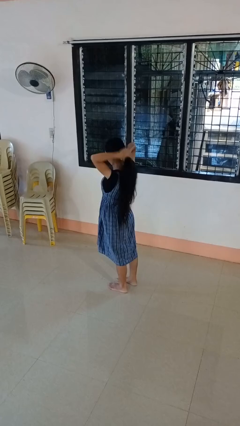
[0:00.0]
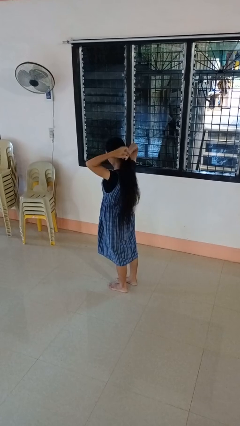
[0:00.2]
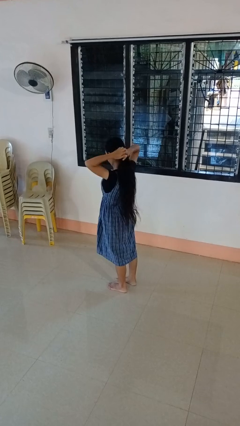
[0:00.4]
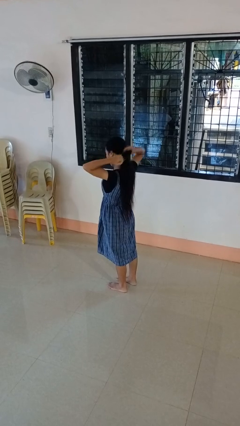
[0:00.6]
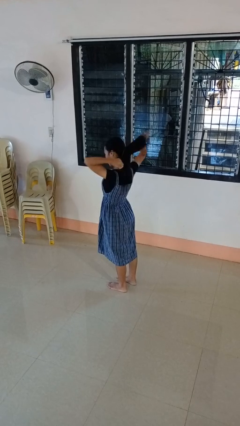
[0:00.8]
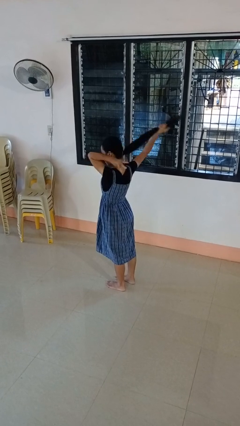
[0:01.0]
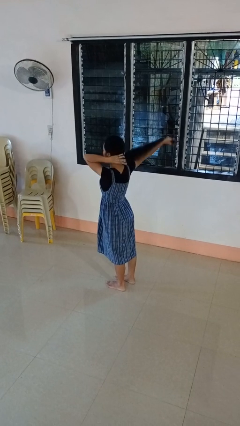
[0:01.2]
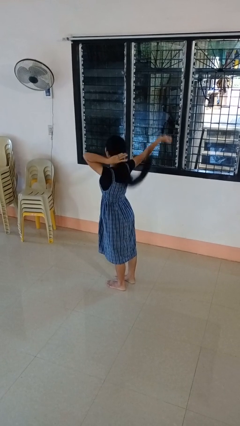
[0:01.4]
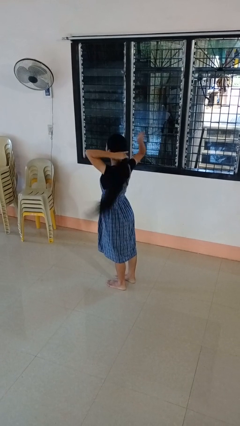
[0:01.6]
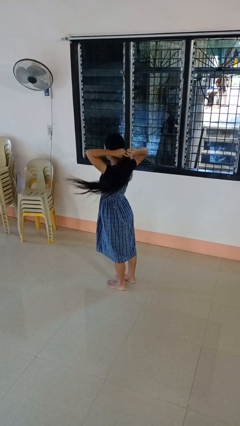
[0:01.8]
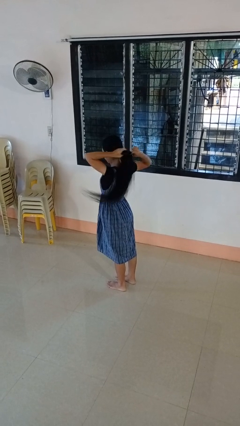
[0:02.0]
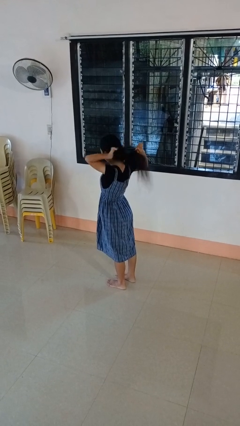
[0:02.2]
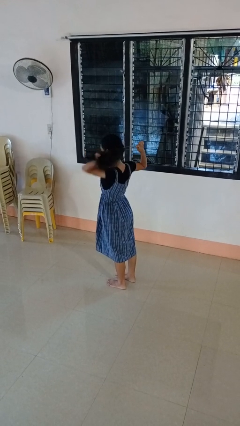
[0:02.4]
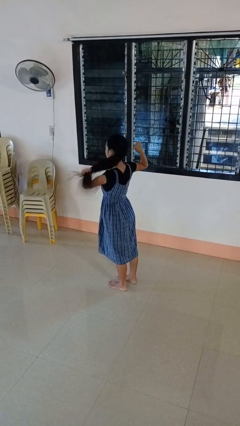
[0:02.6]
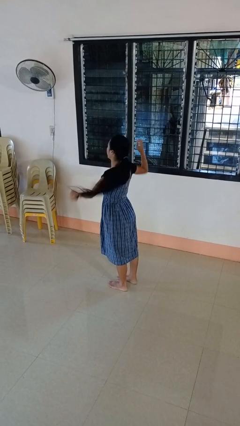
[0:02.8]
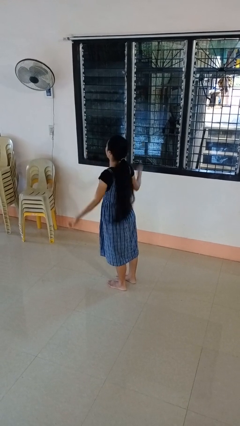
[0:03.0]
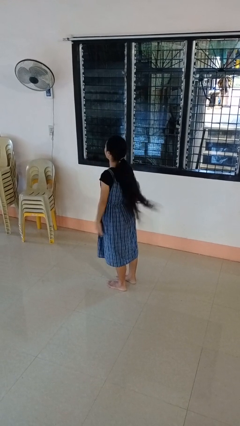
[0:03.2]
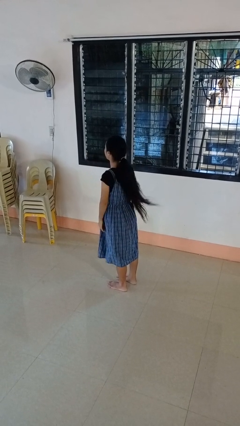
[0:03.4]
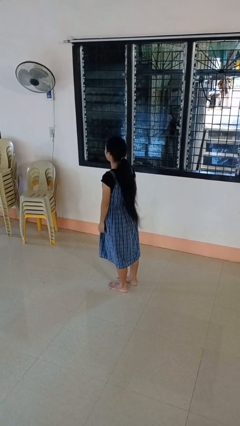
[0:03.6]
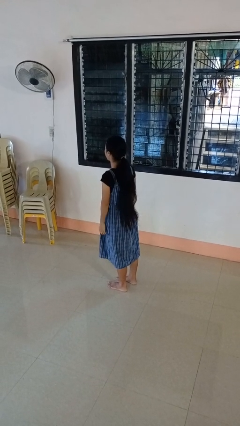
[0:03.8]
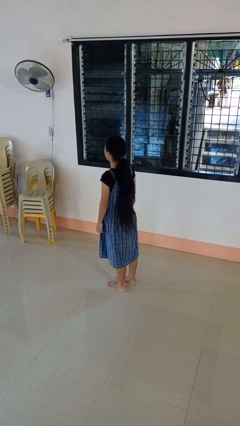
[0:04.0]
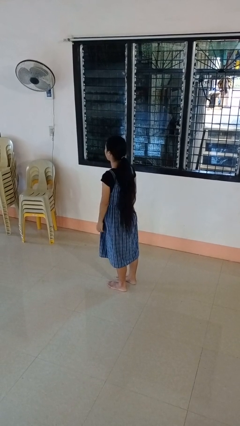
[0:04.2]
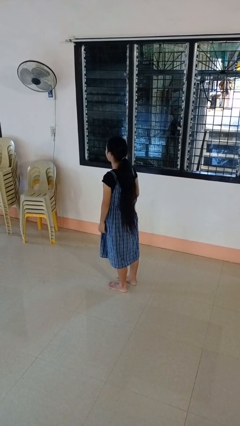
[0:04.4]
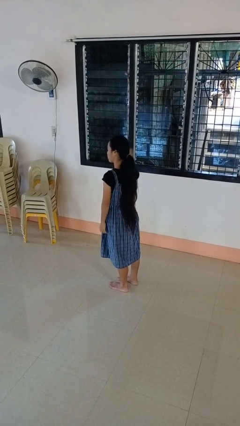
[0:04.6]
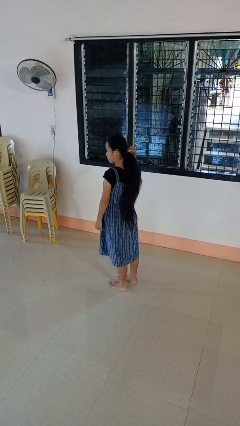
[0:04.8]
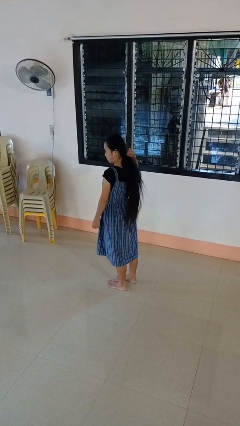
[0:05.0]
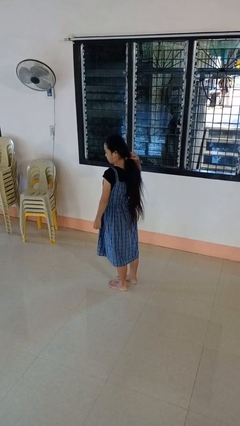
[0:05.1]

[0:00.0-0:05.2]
person puts hair in ponytail

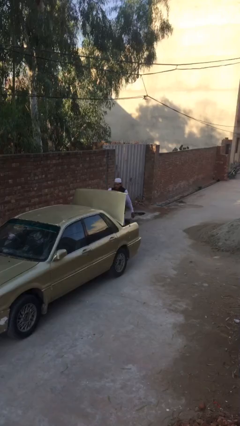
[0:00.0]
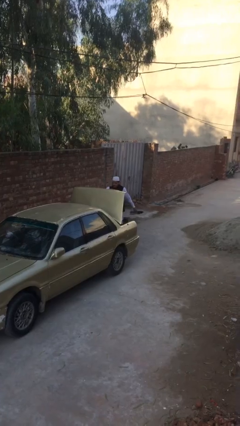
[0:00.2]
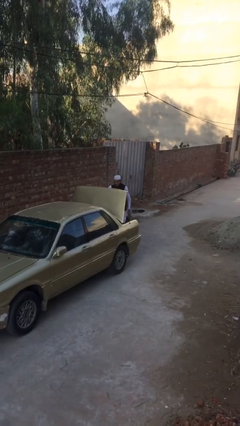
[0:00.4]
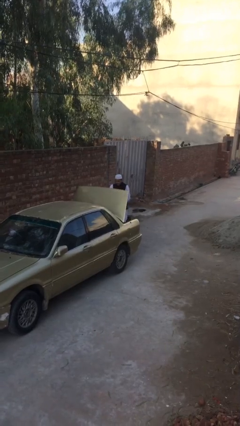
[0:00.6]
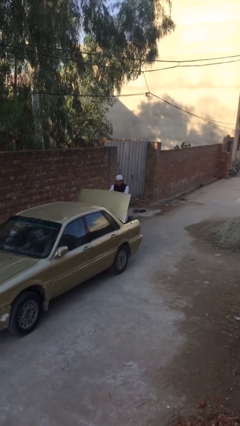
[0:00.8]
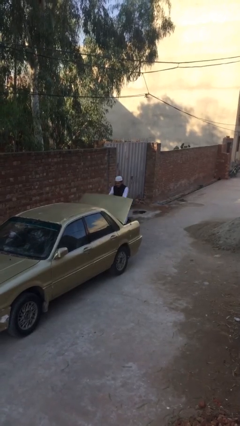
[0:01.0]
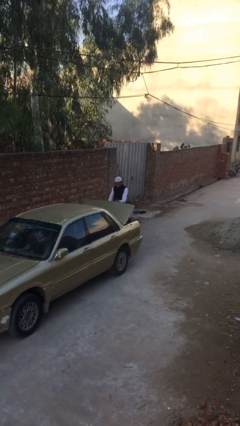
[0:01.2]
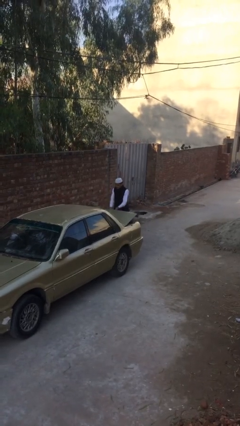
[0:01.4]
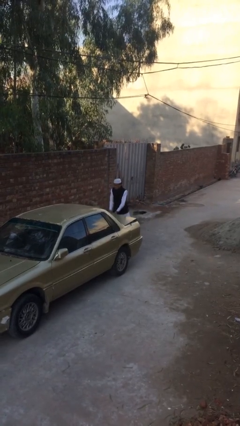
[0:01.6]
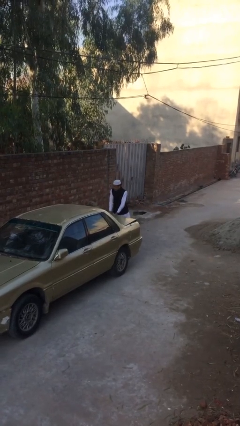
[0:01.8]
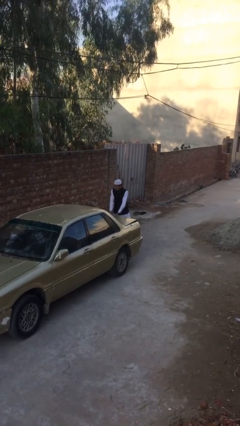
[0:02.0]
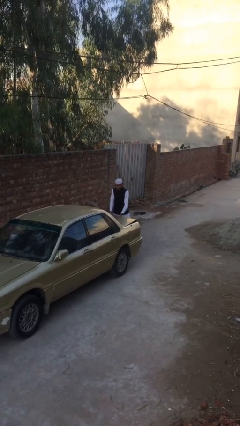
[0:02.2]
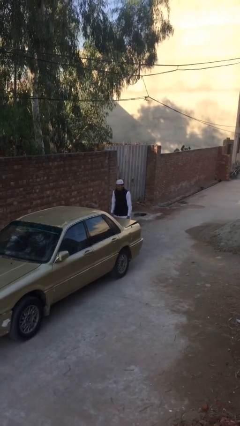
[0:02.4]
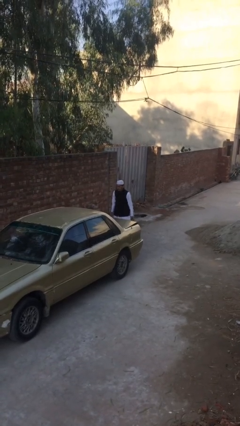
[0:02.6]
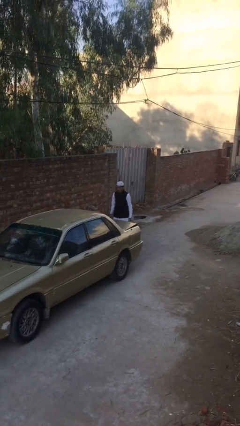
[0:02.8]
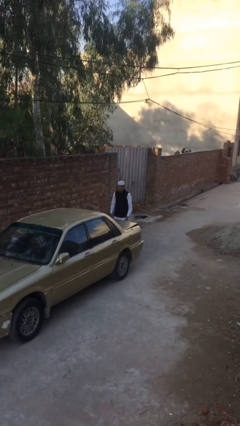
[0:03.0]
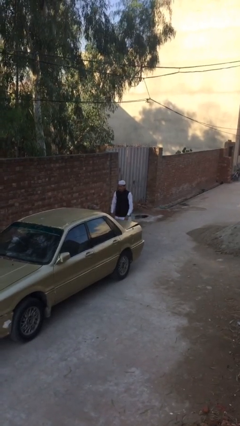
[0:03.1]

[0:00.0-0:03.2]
person closes car trunk

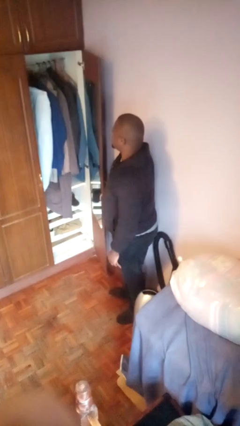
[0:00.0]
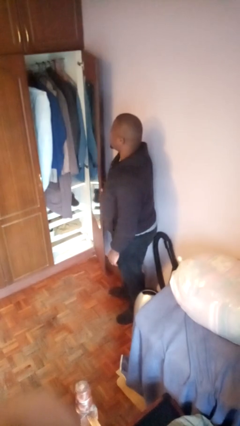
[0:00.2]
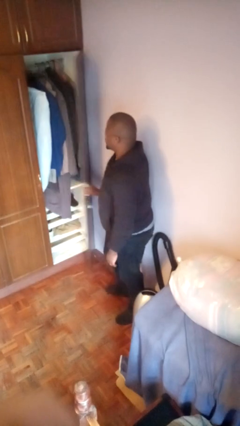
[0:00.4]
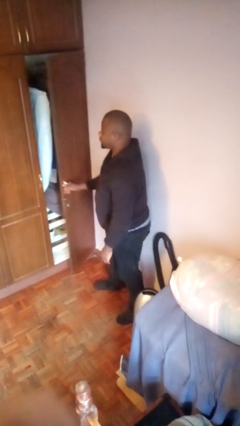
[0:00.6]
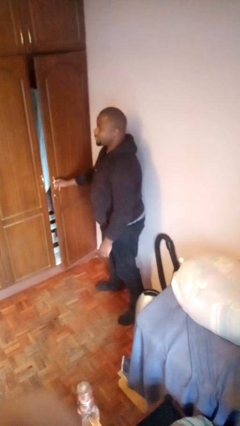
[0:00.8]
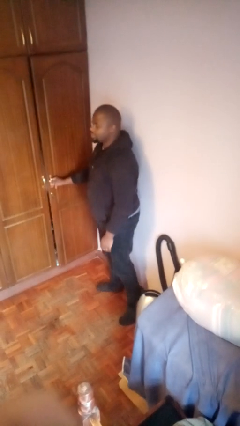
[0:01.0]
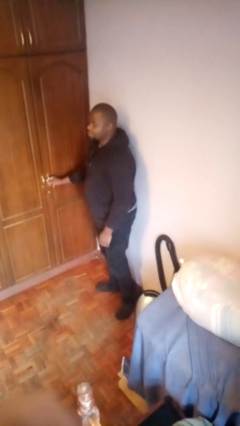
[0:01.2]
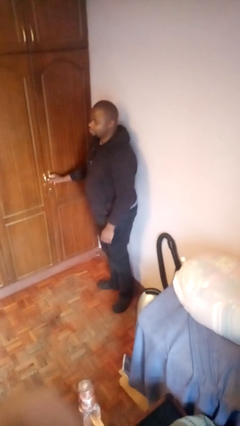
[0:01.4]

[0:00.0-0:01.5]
person closes closet door

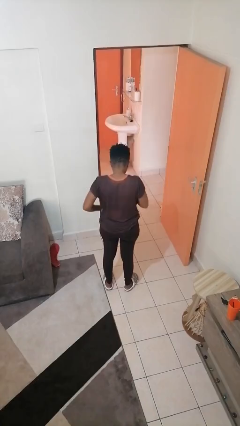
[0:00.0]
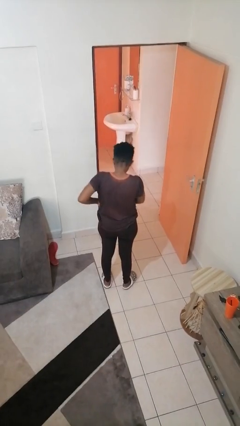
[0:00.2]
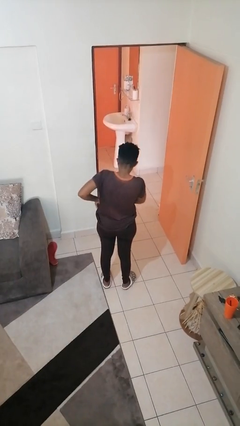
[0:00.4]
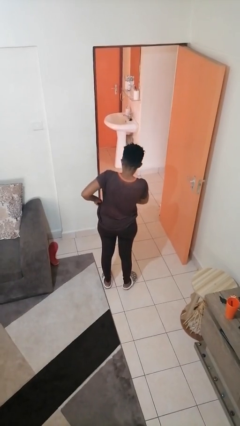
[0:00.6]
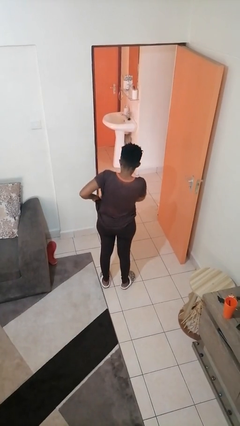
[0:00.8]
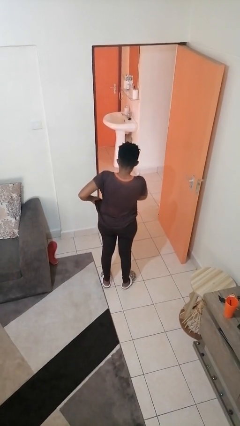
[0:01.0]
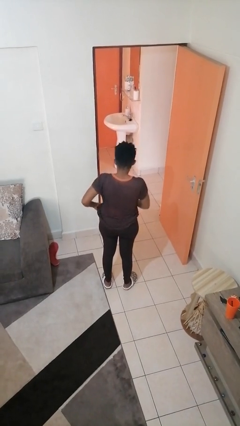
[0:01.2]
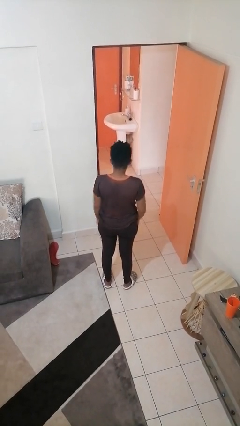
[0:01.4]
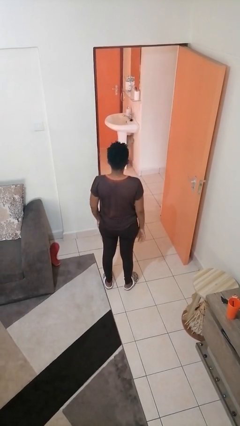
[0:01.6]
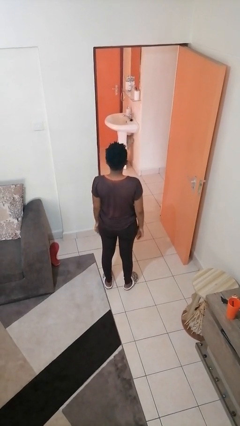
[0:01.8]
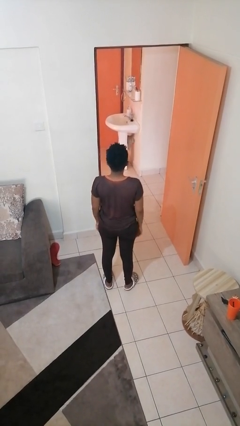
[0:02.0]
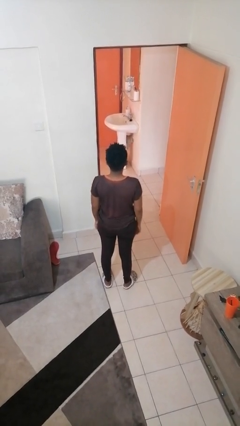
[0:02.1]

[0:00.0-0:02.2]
person puts phone into pocket

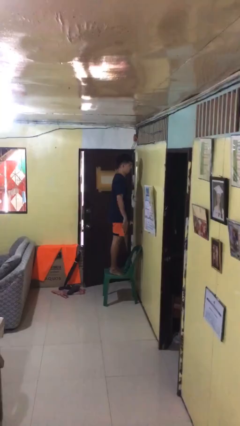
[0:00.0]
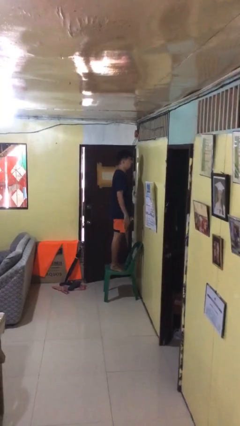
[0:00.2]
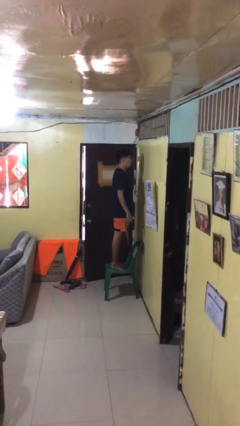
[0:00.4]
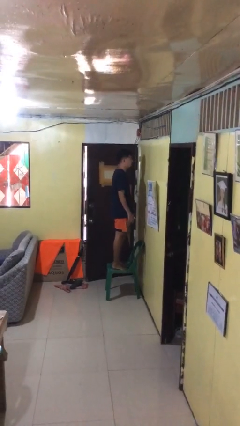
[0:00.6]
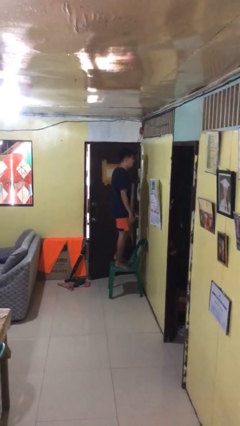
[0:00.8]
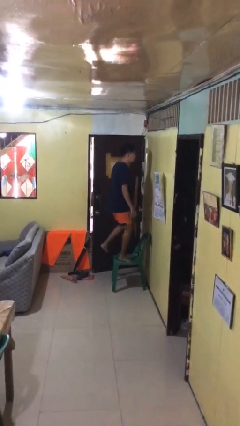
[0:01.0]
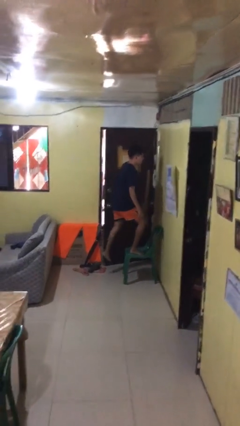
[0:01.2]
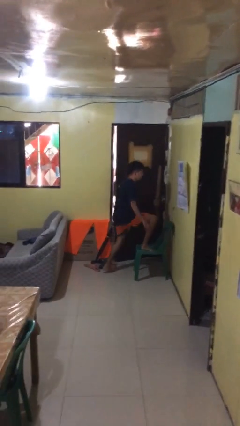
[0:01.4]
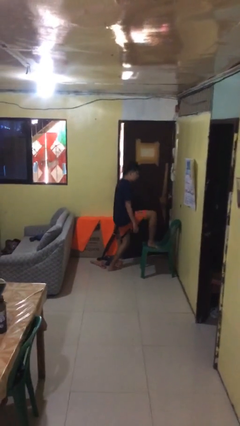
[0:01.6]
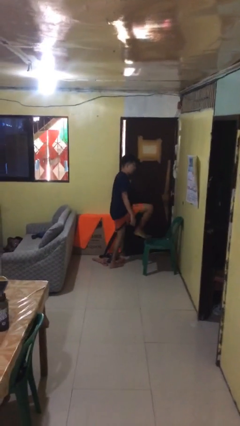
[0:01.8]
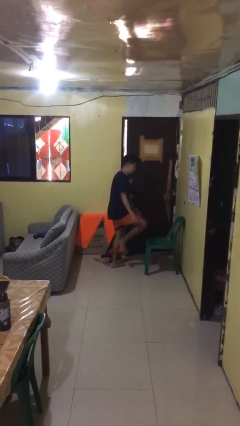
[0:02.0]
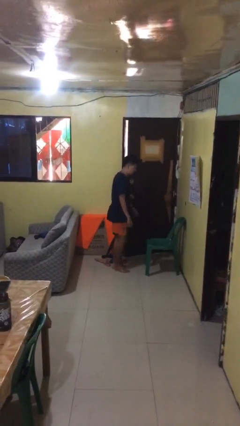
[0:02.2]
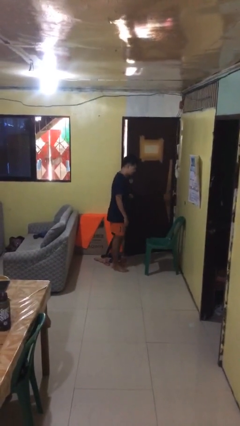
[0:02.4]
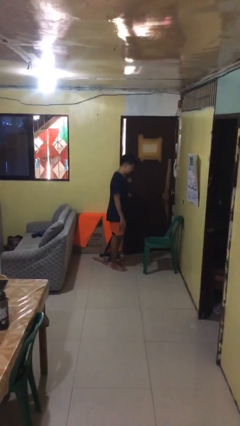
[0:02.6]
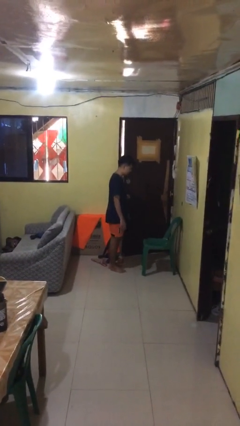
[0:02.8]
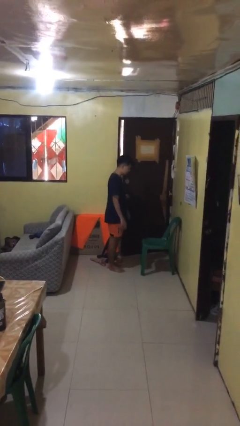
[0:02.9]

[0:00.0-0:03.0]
person climbs off chair

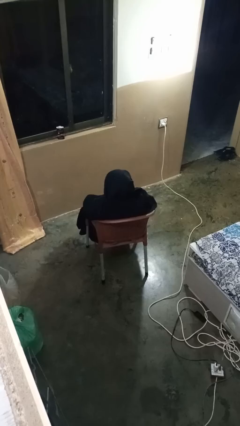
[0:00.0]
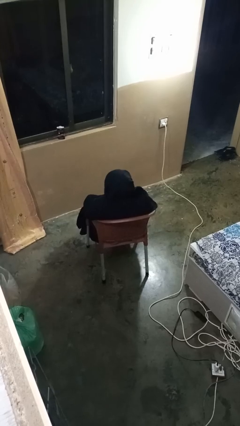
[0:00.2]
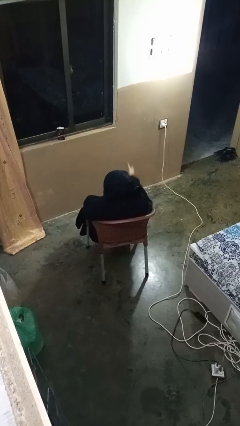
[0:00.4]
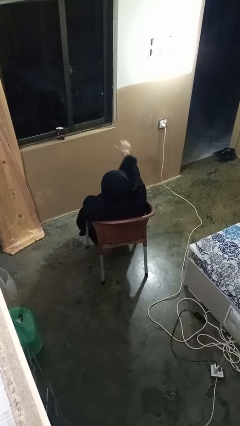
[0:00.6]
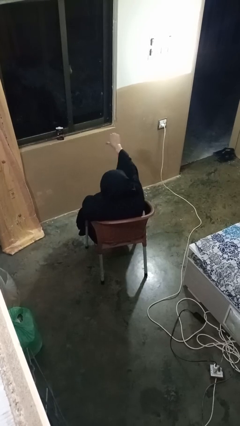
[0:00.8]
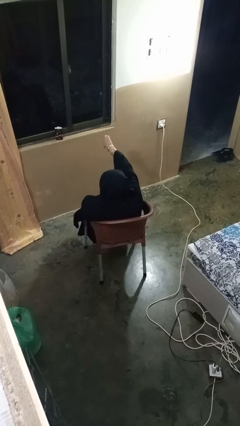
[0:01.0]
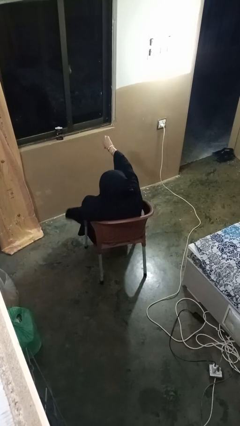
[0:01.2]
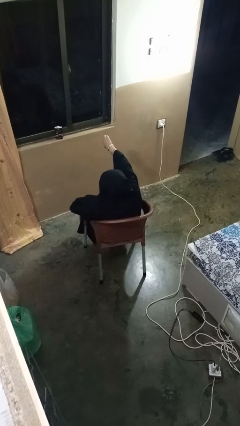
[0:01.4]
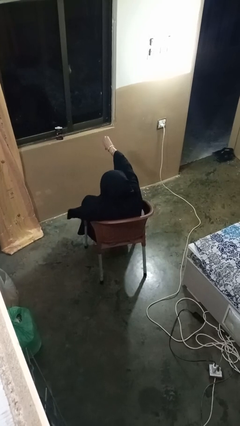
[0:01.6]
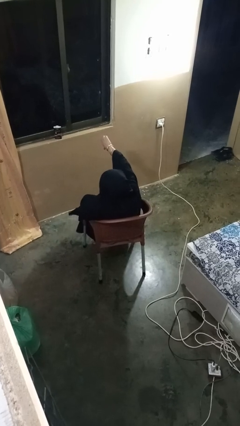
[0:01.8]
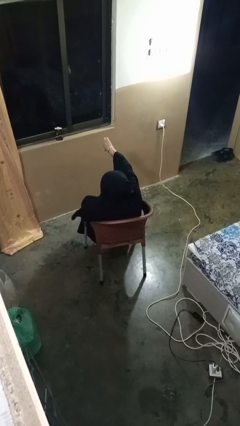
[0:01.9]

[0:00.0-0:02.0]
person gestures thumbs down

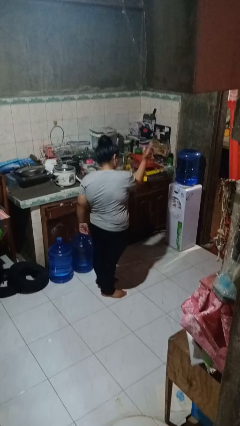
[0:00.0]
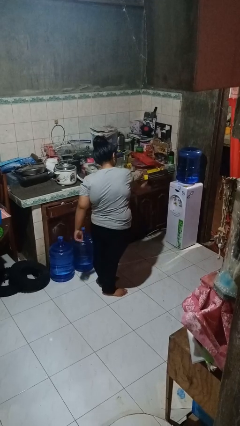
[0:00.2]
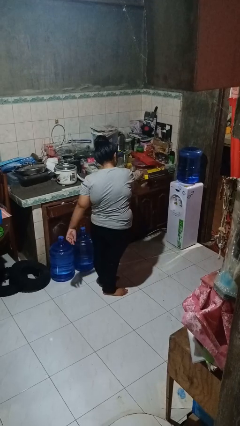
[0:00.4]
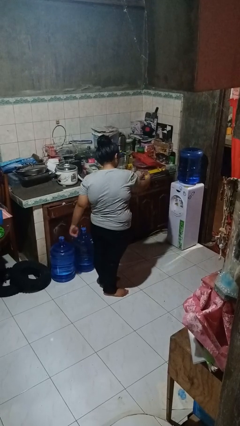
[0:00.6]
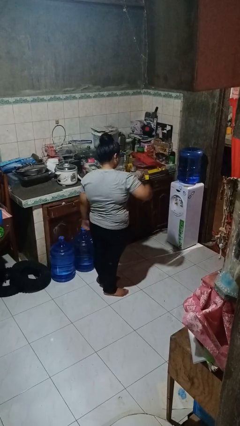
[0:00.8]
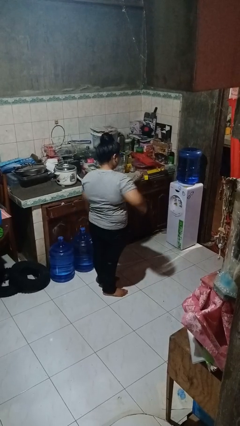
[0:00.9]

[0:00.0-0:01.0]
person karate chop
